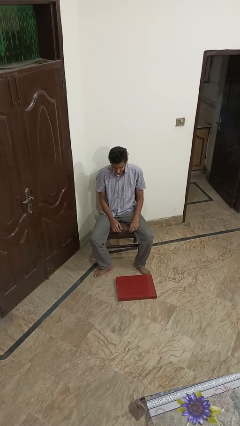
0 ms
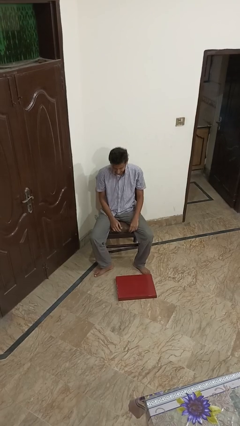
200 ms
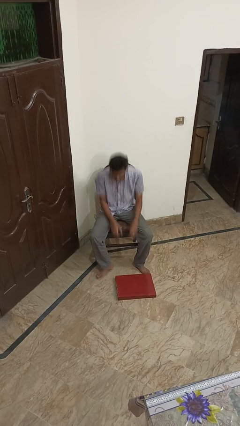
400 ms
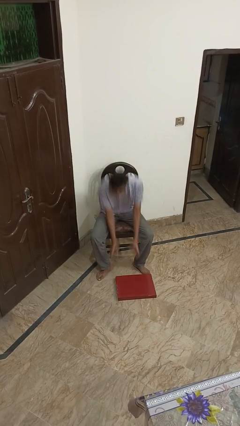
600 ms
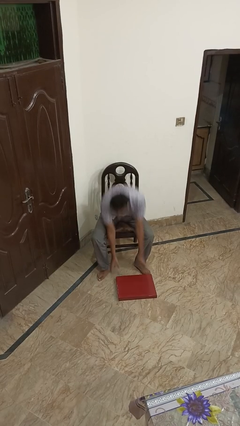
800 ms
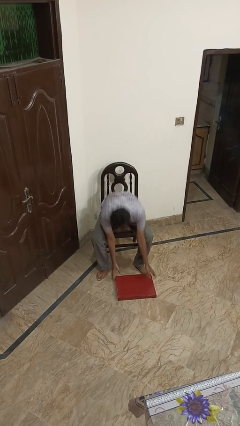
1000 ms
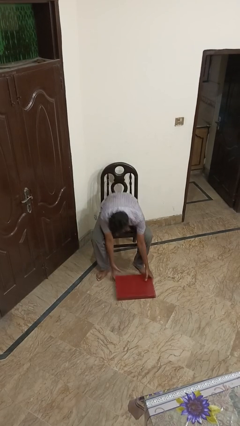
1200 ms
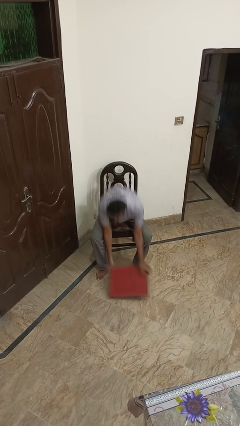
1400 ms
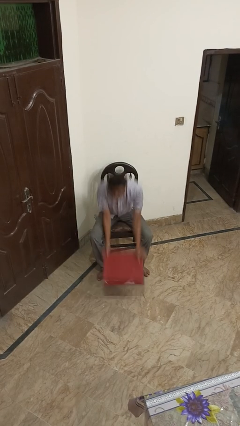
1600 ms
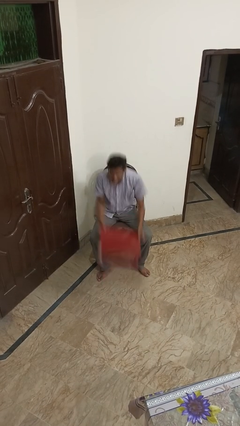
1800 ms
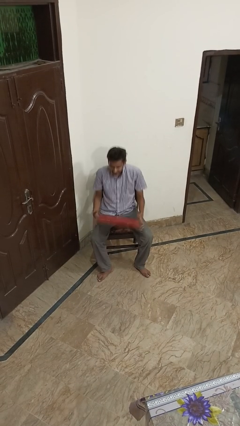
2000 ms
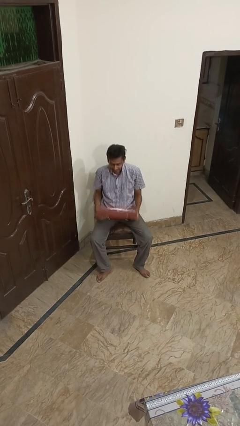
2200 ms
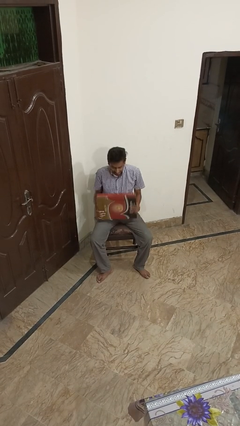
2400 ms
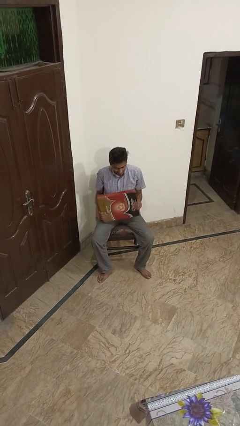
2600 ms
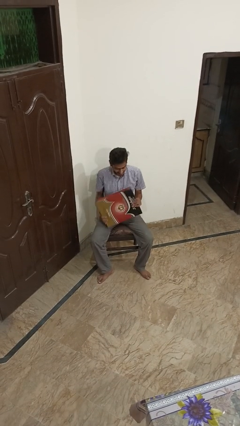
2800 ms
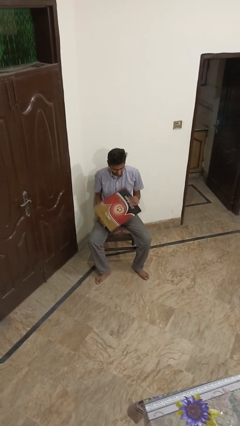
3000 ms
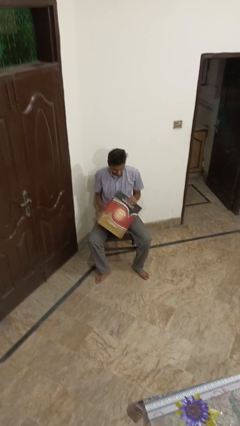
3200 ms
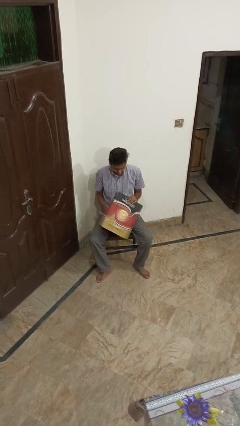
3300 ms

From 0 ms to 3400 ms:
person picks up object from floor

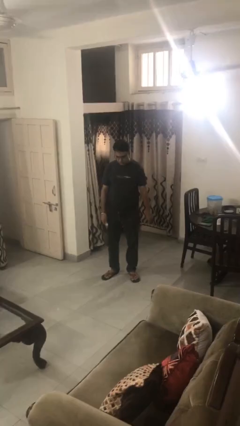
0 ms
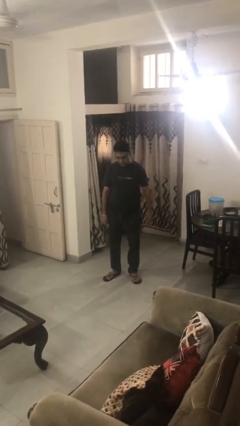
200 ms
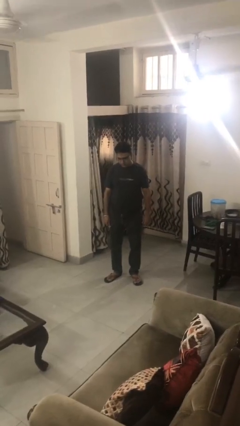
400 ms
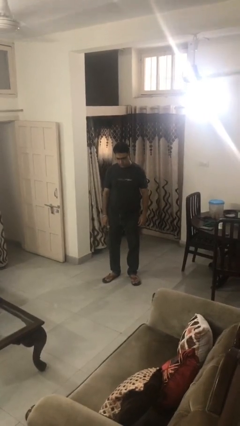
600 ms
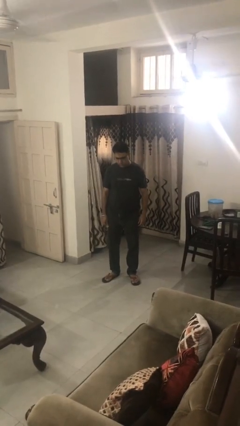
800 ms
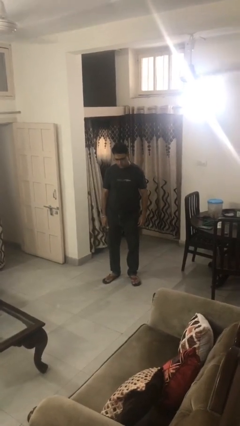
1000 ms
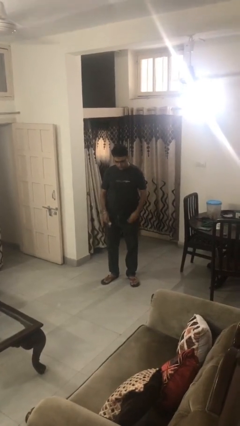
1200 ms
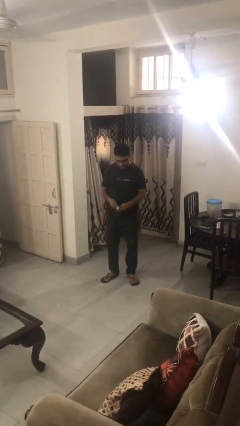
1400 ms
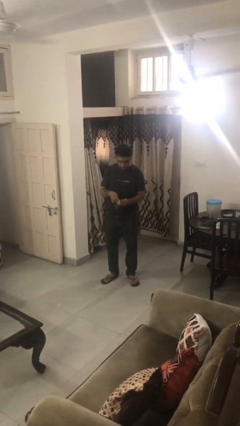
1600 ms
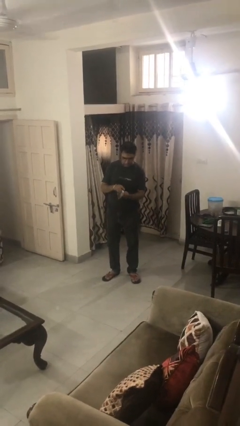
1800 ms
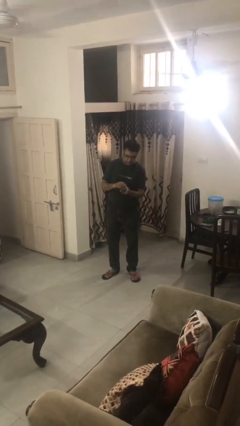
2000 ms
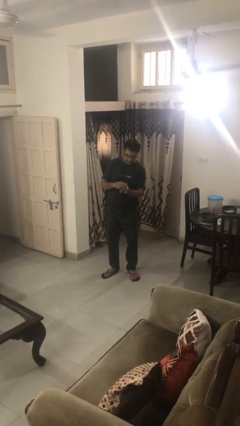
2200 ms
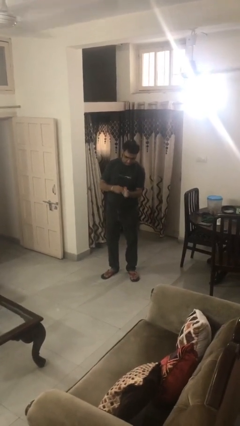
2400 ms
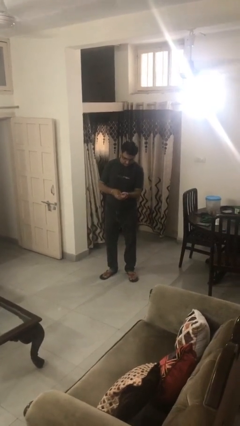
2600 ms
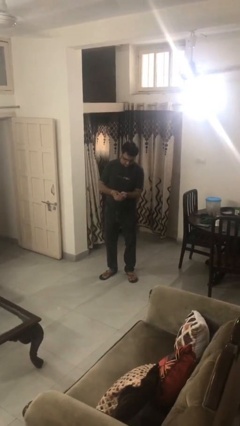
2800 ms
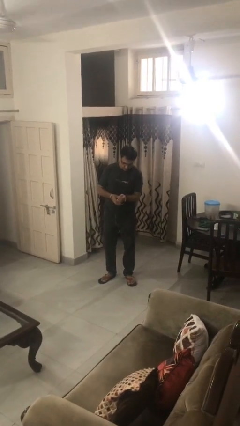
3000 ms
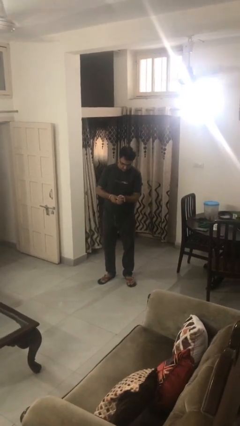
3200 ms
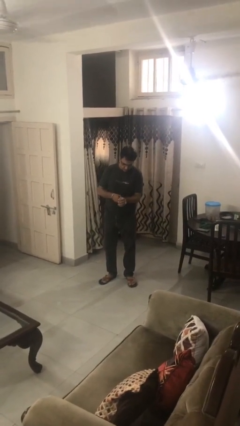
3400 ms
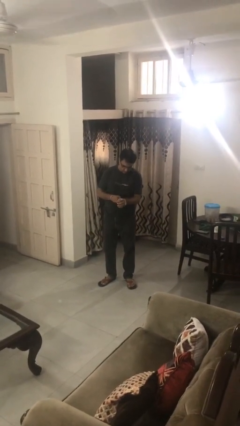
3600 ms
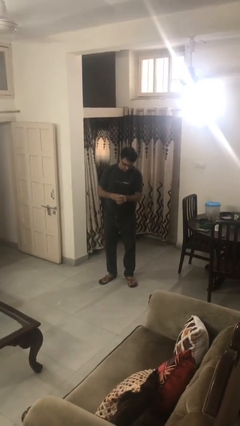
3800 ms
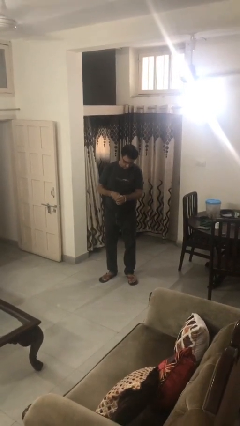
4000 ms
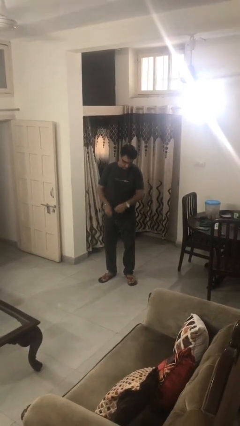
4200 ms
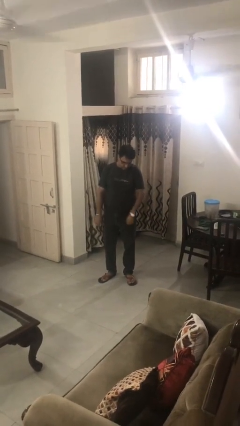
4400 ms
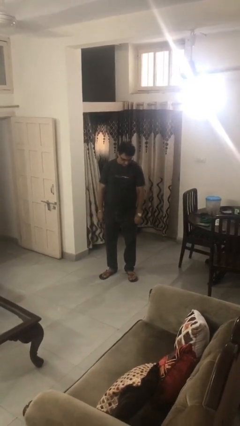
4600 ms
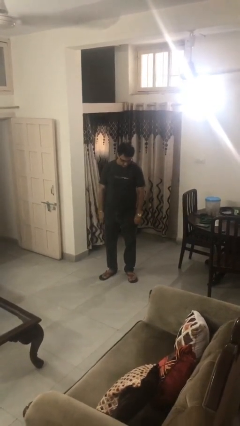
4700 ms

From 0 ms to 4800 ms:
person puts on wristwatch

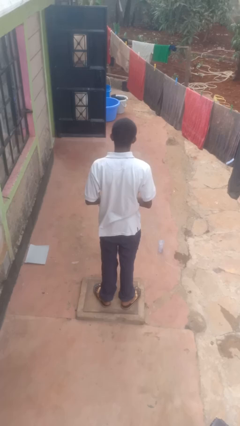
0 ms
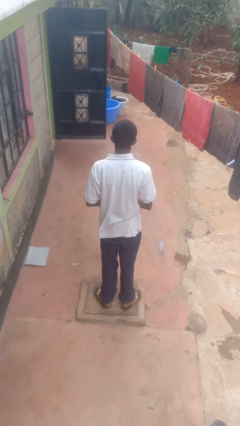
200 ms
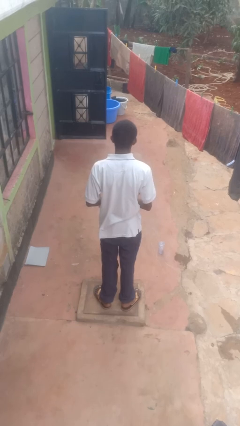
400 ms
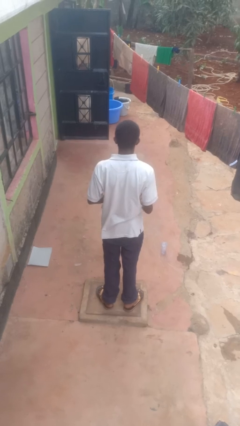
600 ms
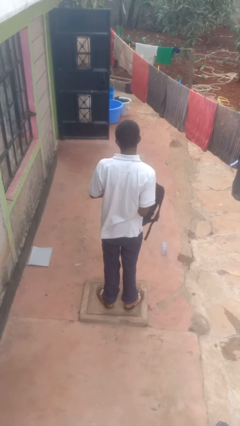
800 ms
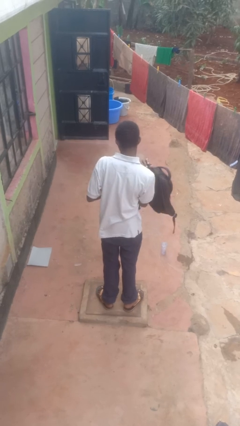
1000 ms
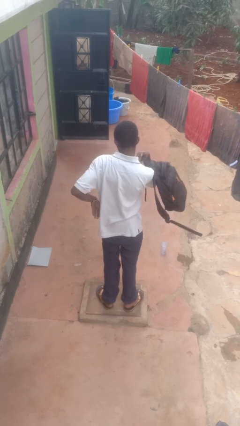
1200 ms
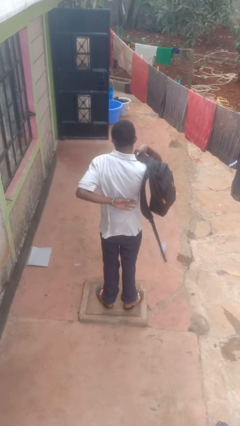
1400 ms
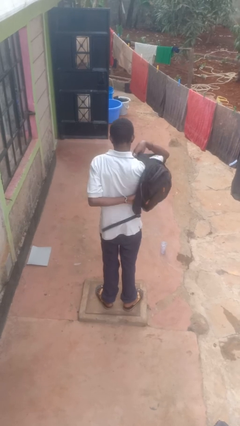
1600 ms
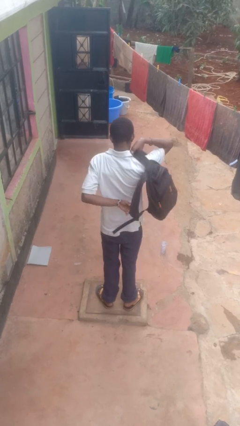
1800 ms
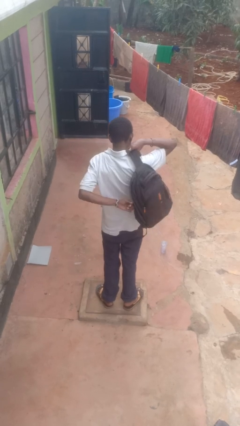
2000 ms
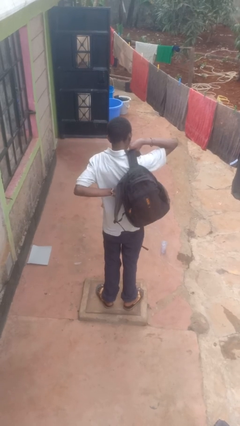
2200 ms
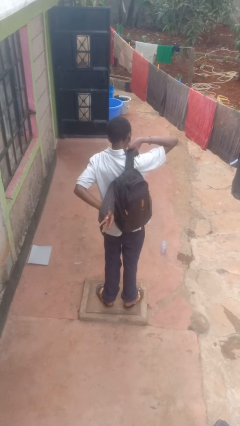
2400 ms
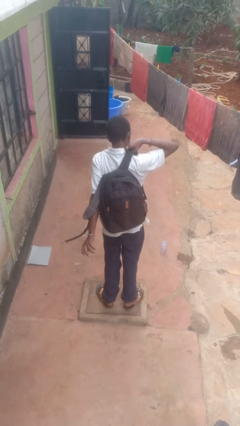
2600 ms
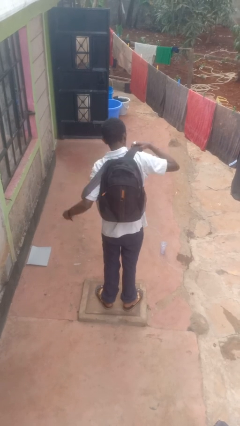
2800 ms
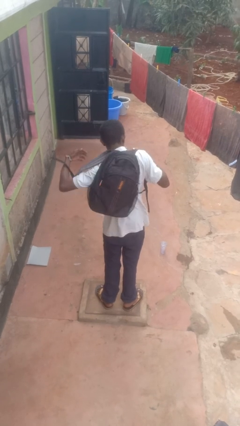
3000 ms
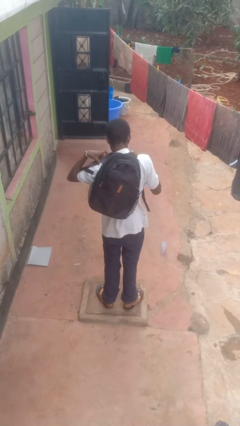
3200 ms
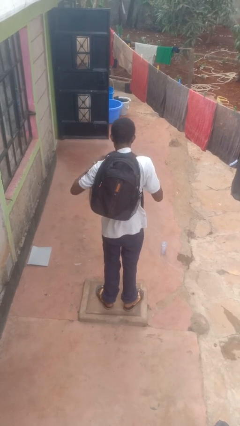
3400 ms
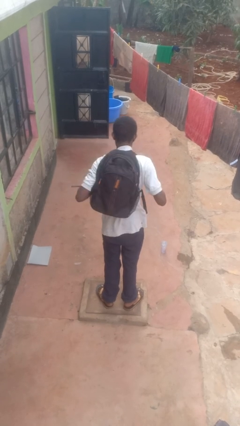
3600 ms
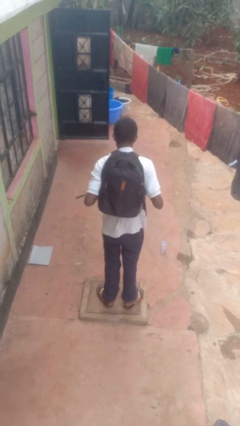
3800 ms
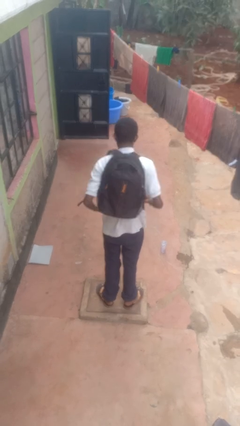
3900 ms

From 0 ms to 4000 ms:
person puts on backpack

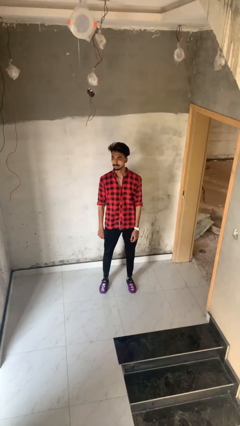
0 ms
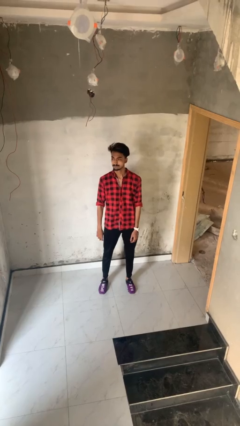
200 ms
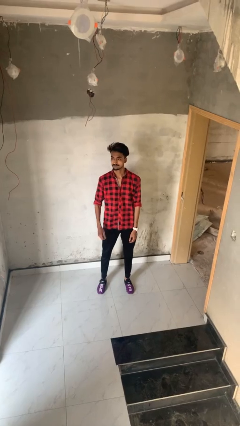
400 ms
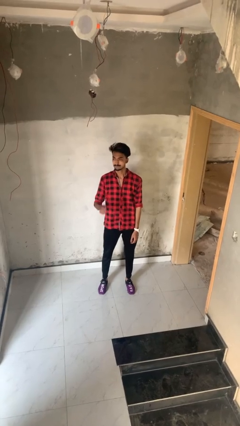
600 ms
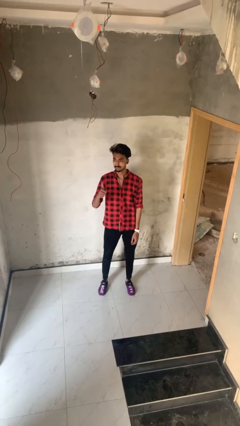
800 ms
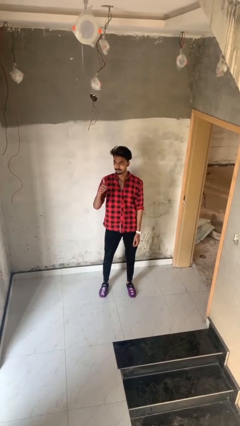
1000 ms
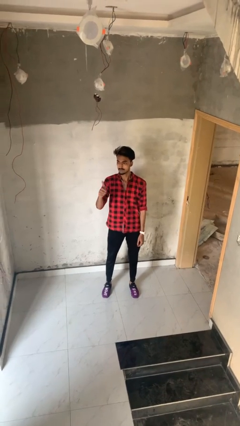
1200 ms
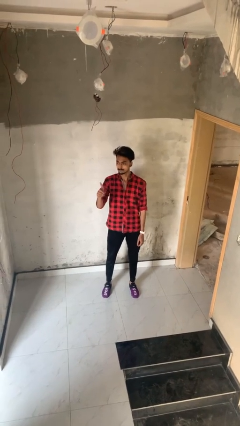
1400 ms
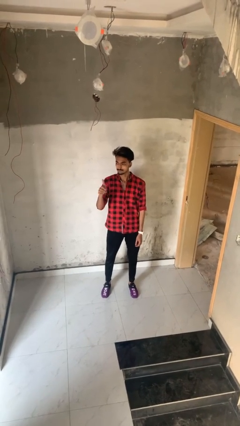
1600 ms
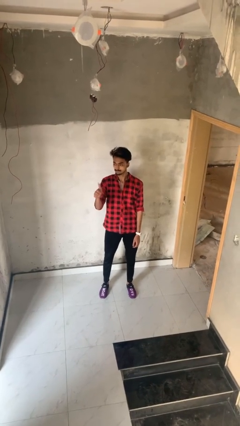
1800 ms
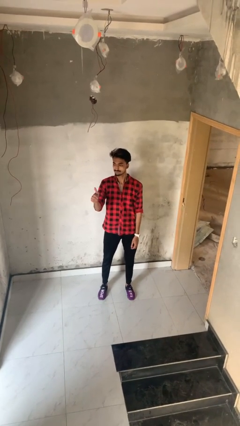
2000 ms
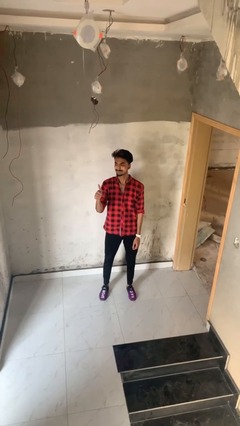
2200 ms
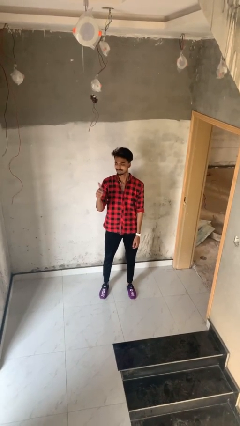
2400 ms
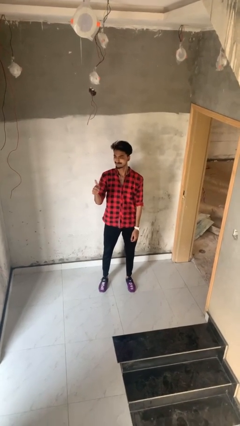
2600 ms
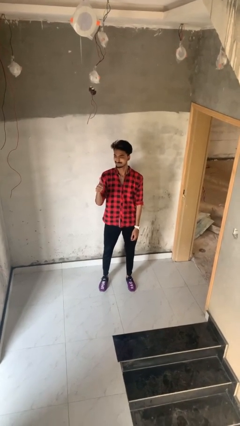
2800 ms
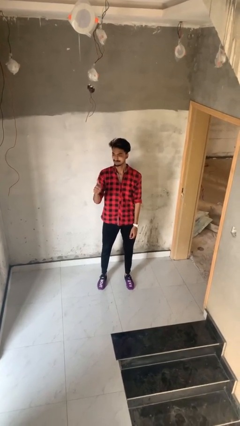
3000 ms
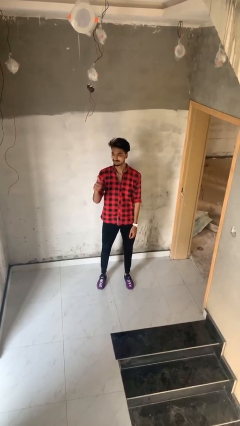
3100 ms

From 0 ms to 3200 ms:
person gestures thumbs up

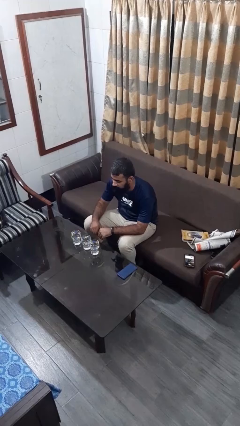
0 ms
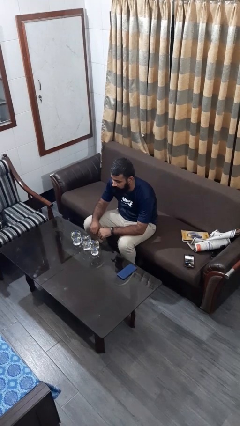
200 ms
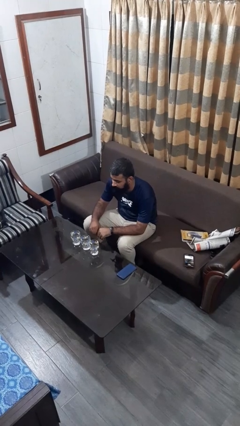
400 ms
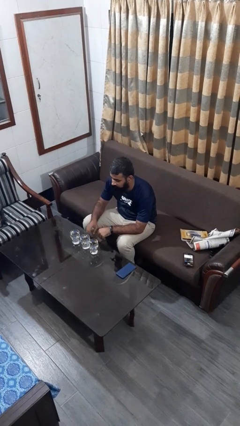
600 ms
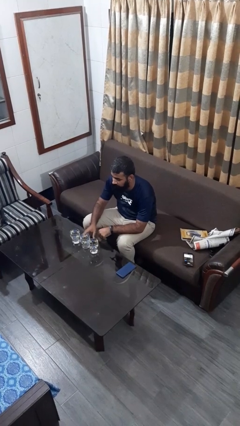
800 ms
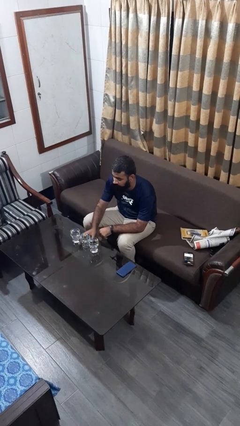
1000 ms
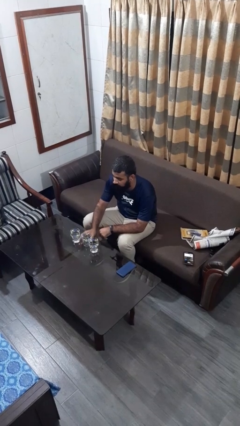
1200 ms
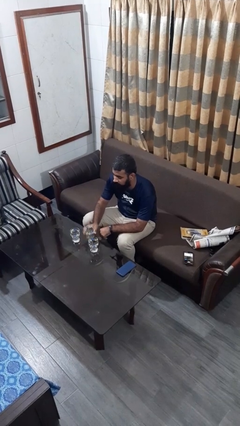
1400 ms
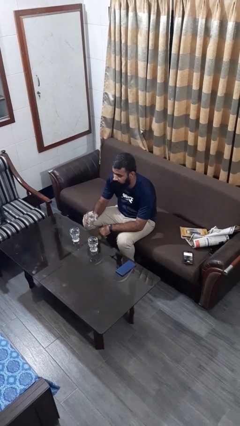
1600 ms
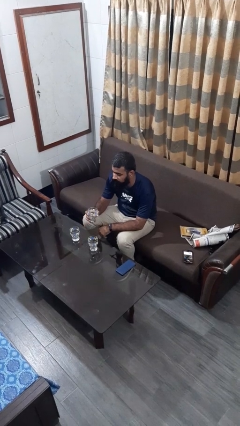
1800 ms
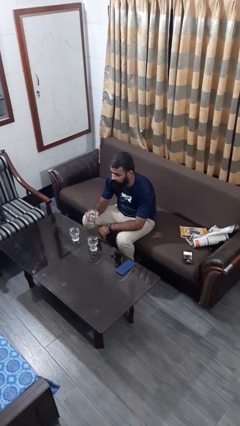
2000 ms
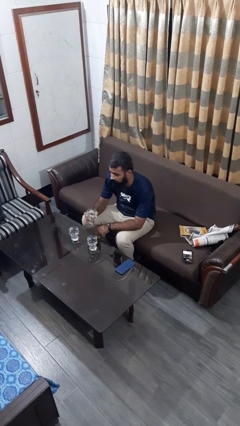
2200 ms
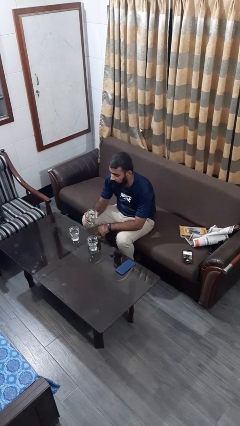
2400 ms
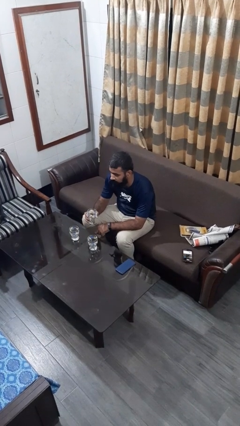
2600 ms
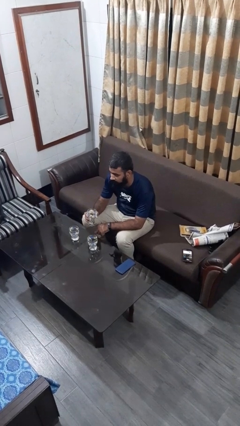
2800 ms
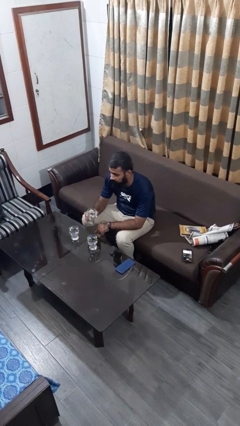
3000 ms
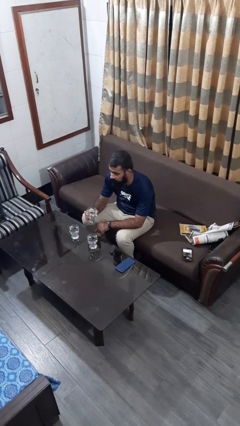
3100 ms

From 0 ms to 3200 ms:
person picks up object from table
